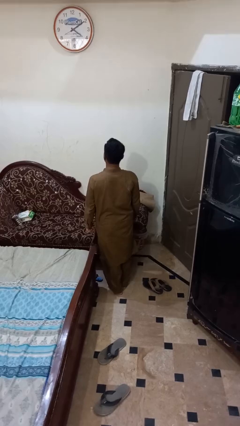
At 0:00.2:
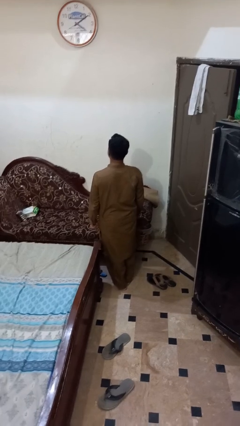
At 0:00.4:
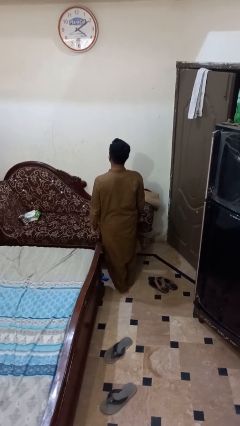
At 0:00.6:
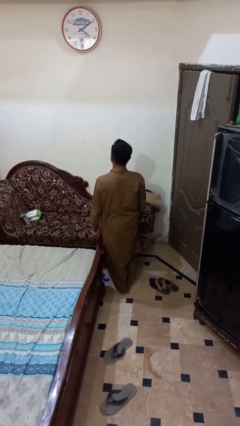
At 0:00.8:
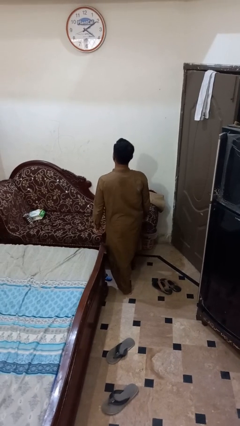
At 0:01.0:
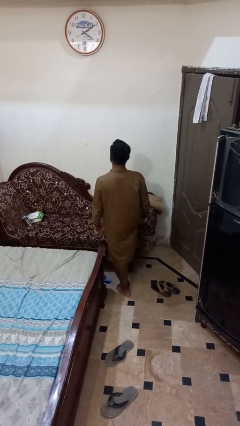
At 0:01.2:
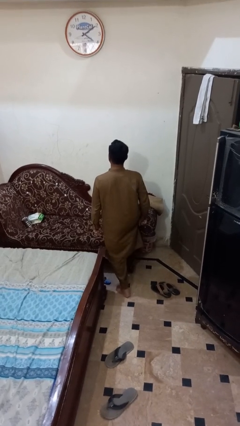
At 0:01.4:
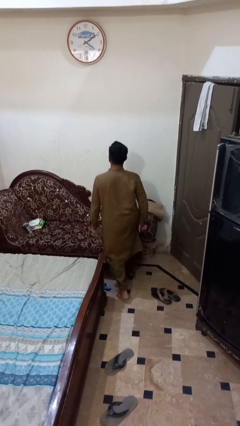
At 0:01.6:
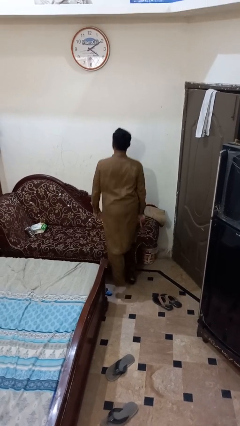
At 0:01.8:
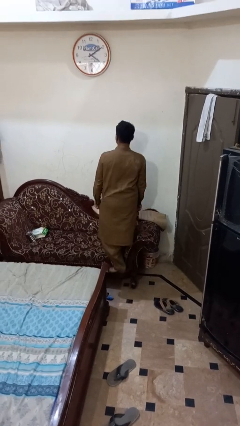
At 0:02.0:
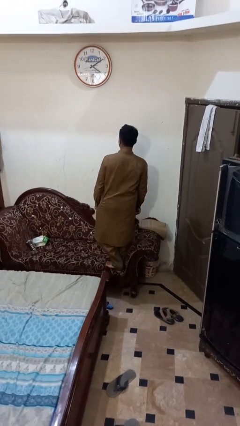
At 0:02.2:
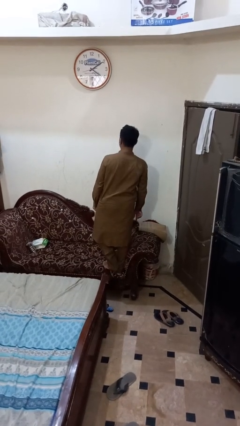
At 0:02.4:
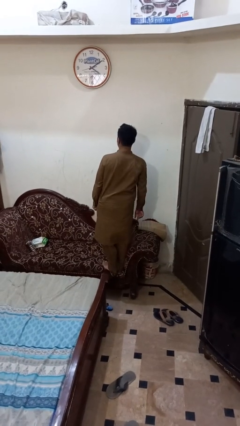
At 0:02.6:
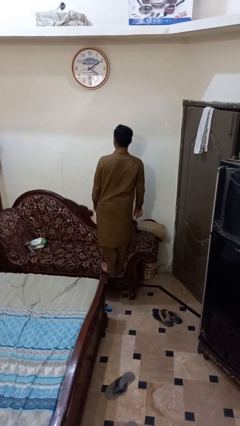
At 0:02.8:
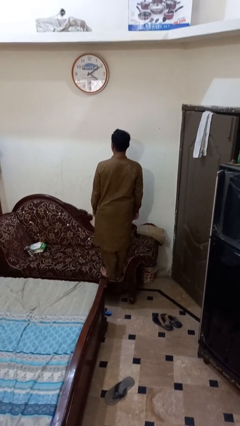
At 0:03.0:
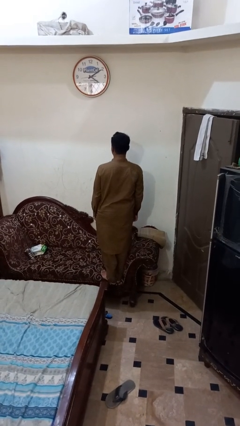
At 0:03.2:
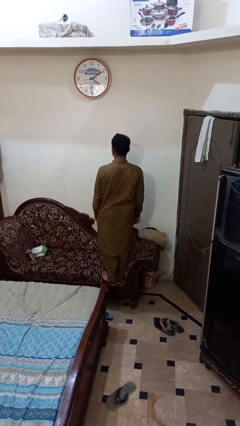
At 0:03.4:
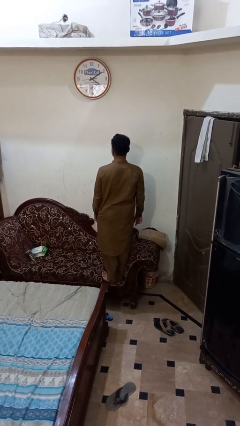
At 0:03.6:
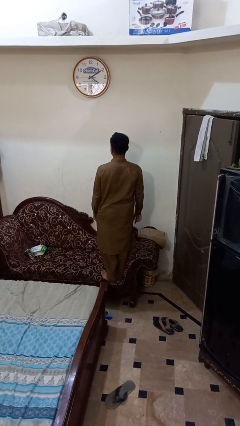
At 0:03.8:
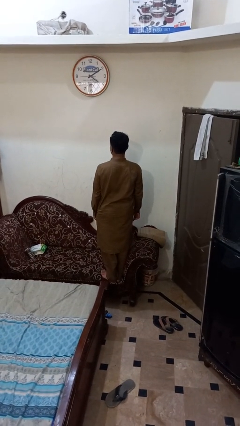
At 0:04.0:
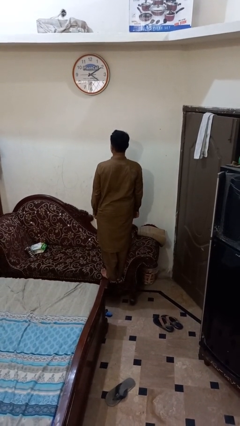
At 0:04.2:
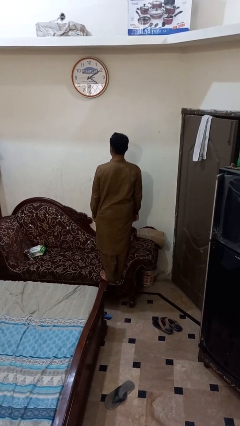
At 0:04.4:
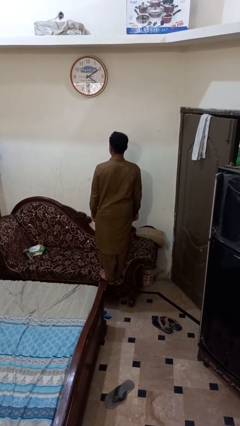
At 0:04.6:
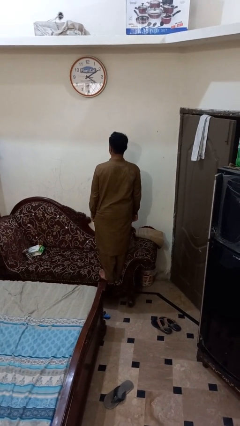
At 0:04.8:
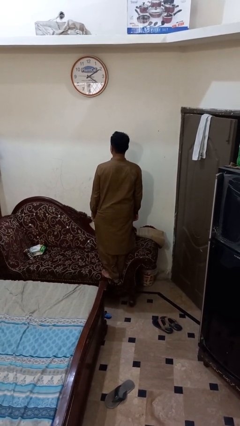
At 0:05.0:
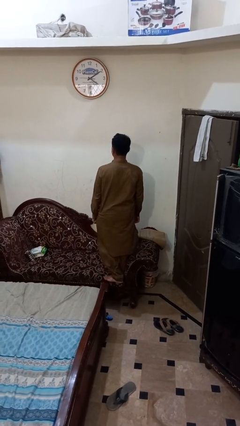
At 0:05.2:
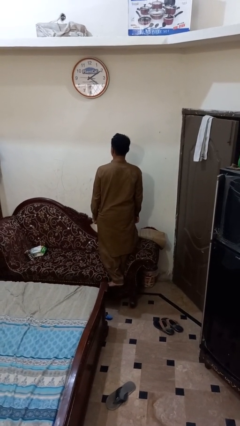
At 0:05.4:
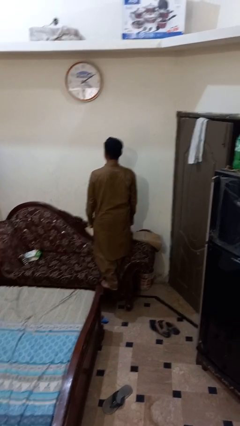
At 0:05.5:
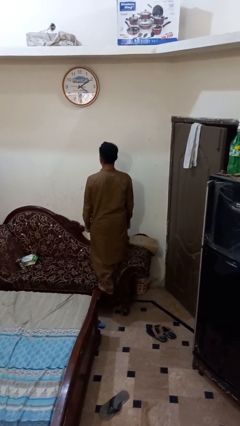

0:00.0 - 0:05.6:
person climbs on couch

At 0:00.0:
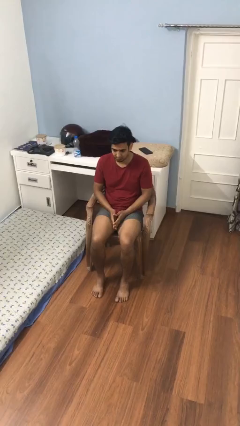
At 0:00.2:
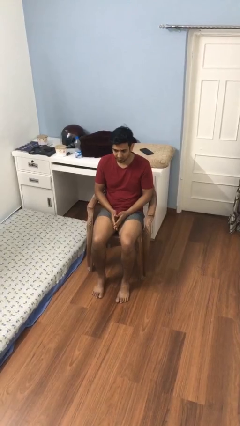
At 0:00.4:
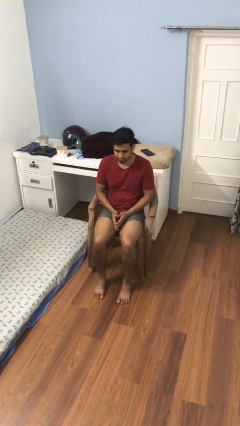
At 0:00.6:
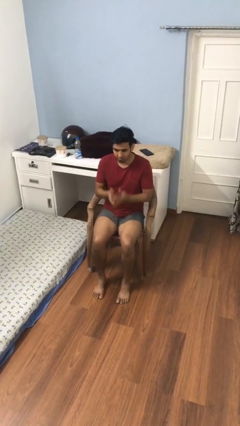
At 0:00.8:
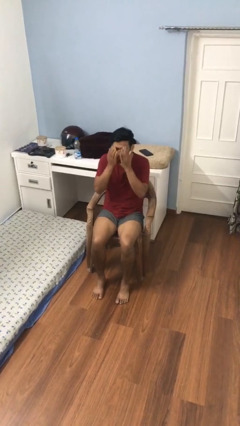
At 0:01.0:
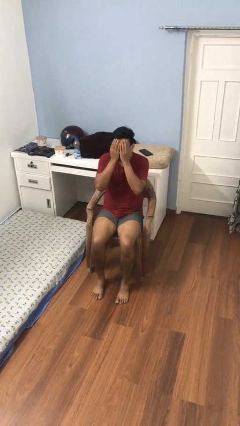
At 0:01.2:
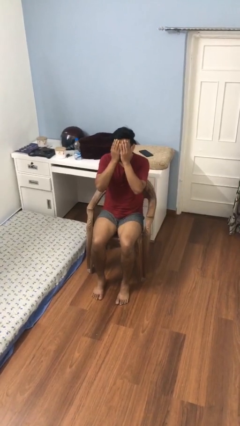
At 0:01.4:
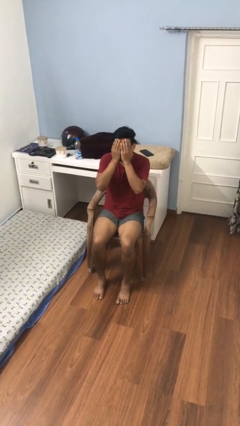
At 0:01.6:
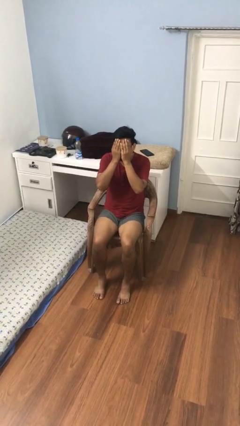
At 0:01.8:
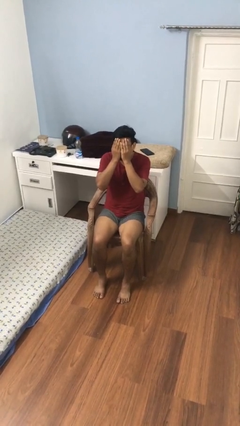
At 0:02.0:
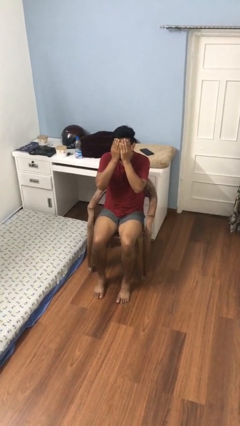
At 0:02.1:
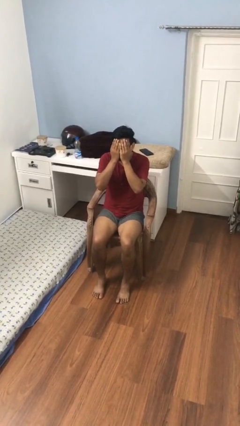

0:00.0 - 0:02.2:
person covers face with hands

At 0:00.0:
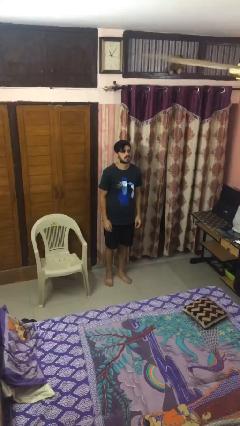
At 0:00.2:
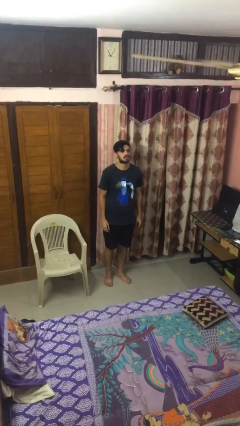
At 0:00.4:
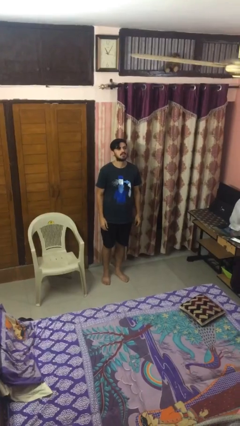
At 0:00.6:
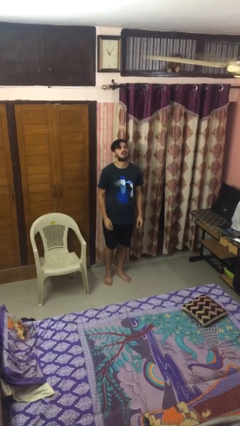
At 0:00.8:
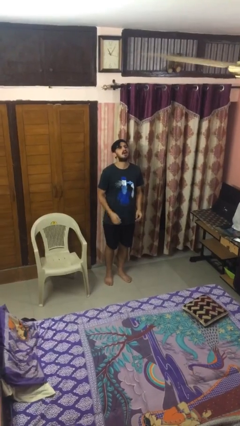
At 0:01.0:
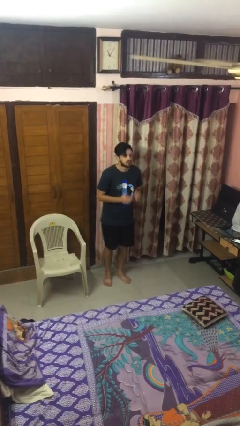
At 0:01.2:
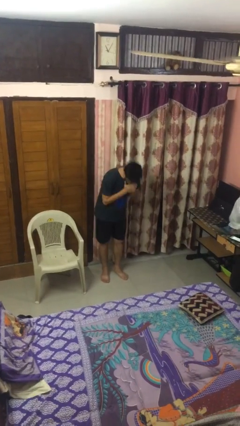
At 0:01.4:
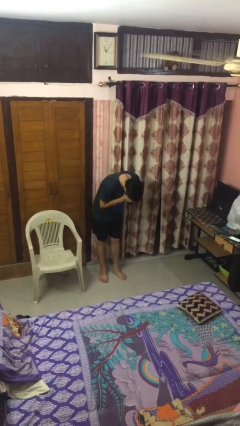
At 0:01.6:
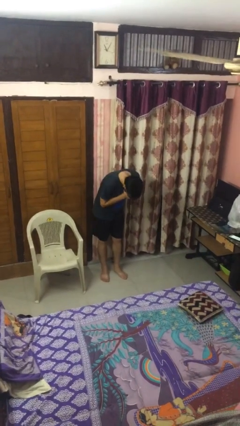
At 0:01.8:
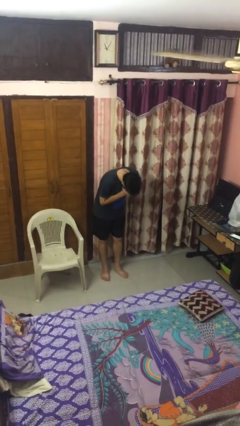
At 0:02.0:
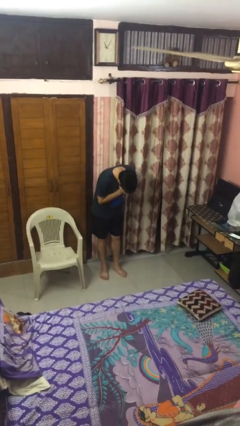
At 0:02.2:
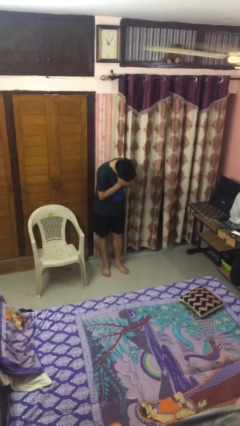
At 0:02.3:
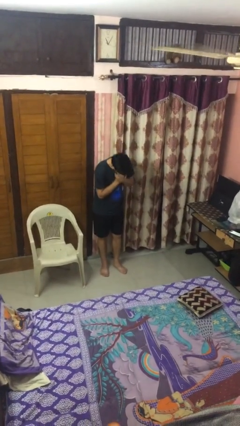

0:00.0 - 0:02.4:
person sneezes into hand

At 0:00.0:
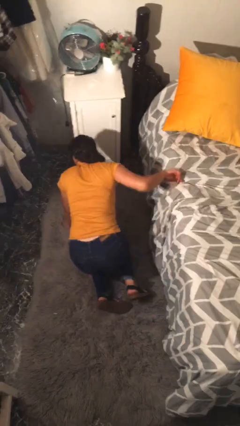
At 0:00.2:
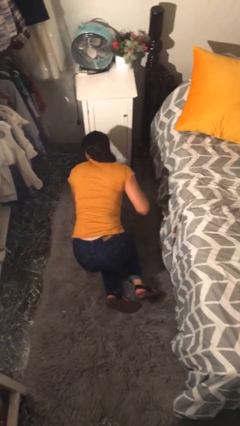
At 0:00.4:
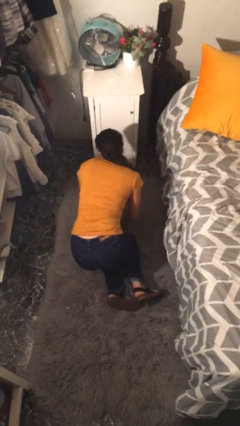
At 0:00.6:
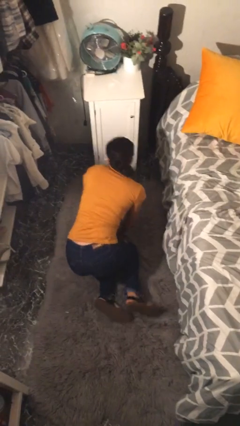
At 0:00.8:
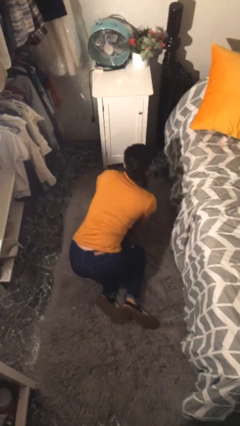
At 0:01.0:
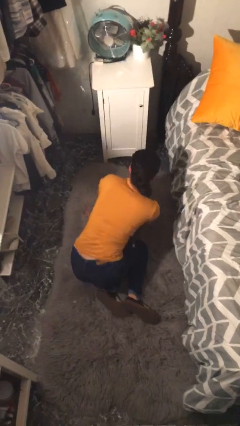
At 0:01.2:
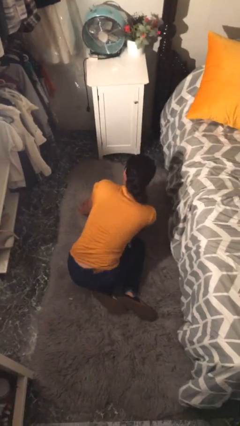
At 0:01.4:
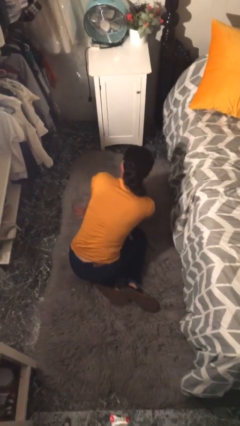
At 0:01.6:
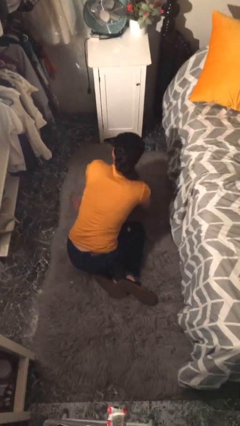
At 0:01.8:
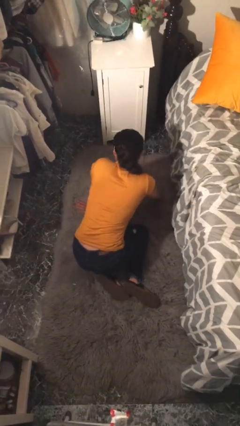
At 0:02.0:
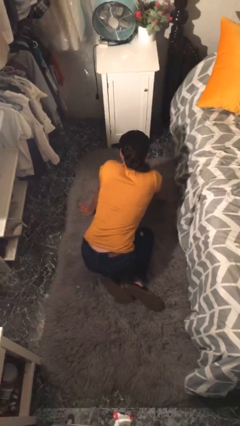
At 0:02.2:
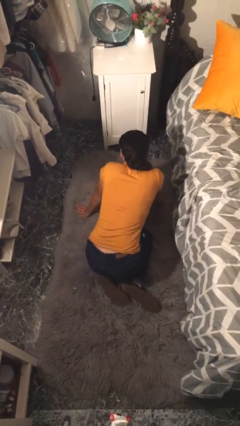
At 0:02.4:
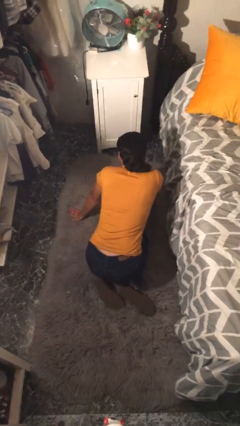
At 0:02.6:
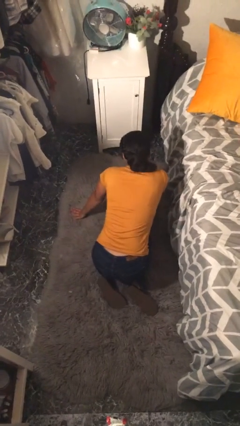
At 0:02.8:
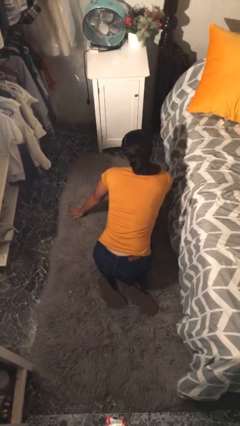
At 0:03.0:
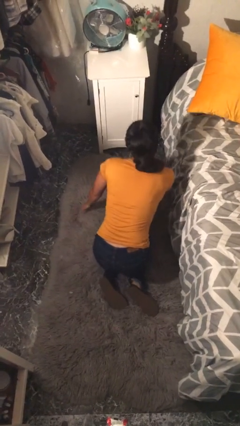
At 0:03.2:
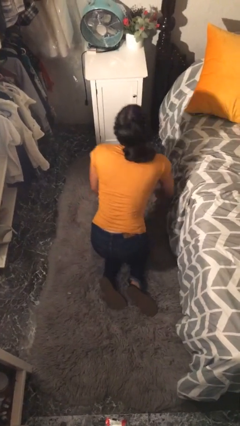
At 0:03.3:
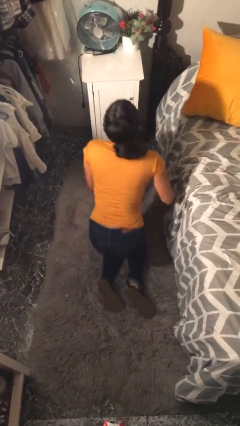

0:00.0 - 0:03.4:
person falls from bed

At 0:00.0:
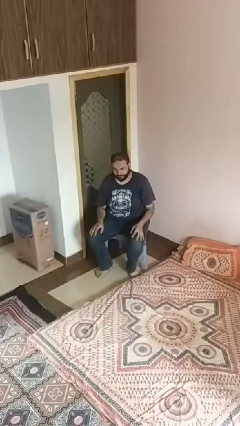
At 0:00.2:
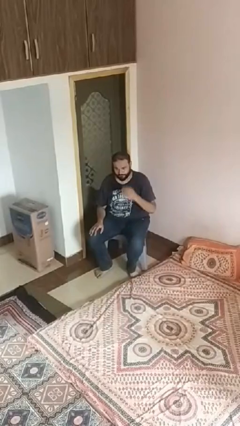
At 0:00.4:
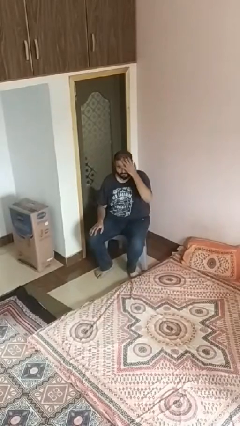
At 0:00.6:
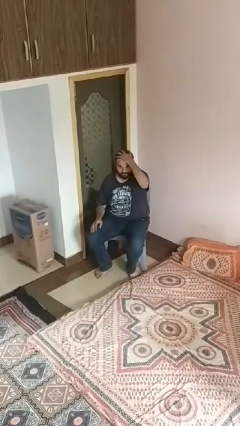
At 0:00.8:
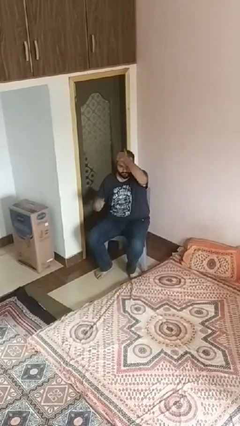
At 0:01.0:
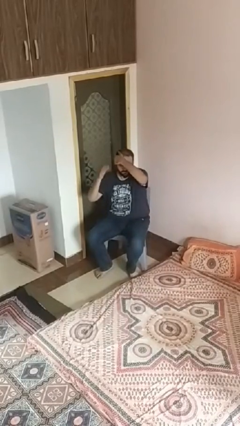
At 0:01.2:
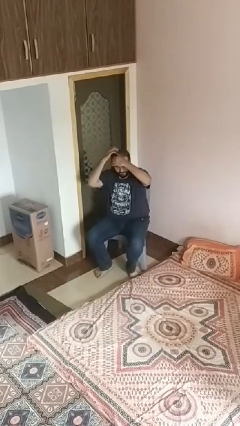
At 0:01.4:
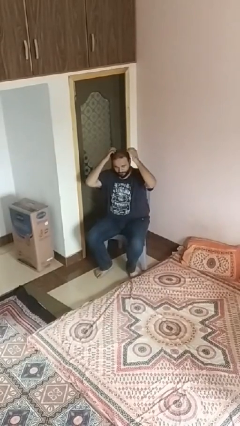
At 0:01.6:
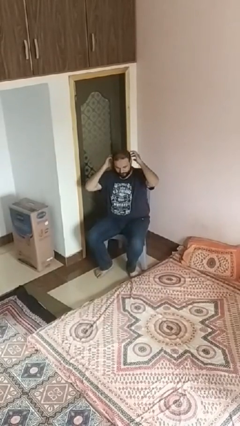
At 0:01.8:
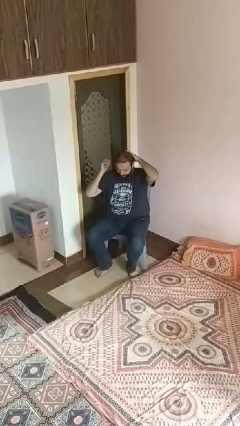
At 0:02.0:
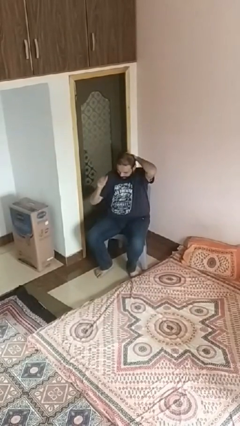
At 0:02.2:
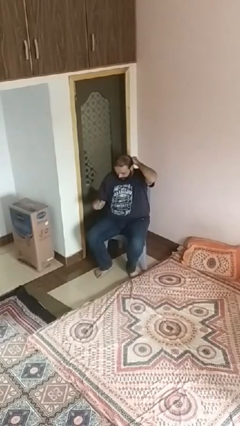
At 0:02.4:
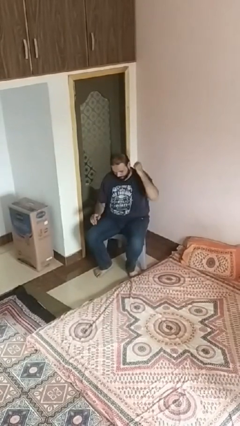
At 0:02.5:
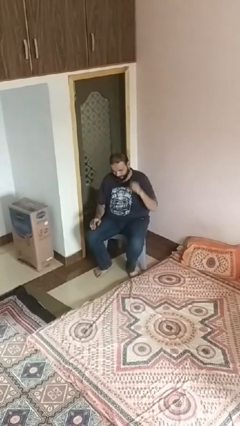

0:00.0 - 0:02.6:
person strokes hair

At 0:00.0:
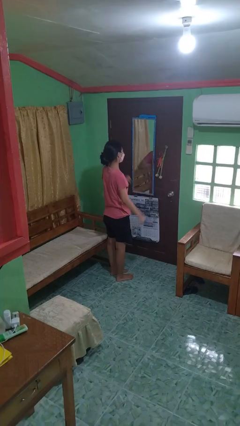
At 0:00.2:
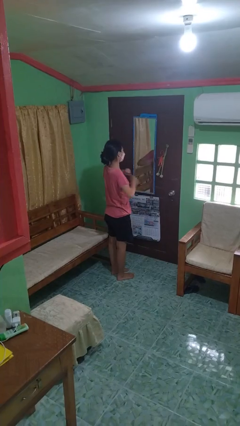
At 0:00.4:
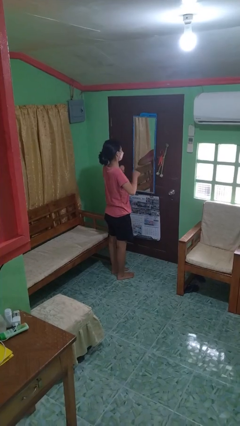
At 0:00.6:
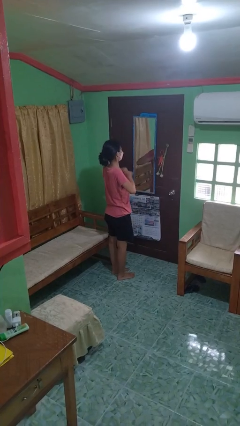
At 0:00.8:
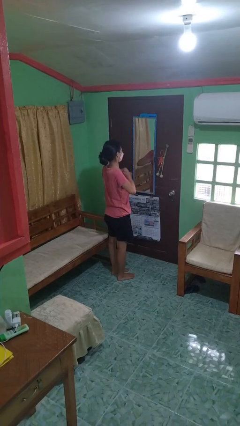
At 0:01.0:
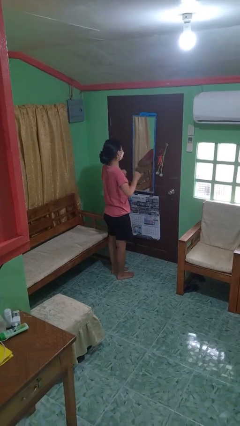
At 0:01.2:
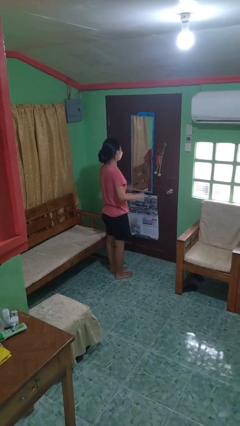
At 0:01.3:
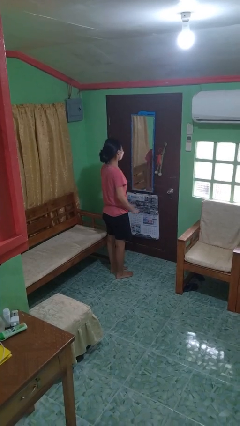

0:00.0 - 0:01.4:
person drums on chest
